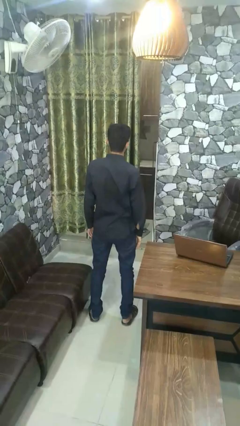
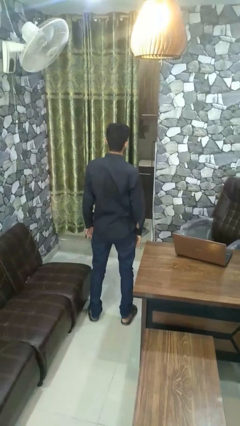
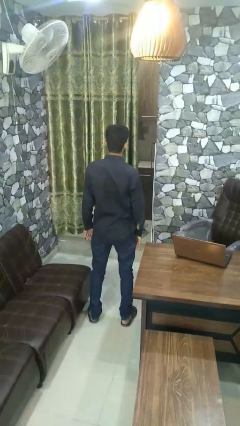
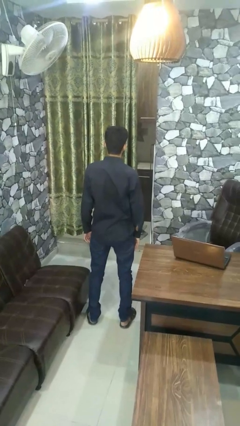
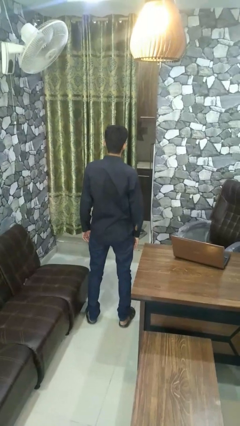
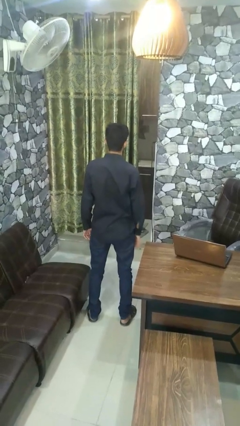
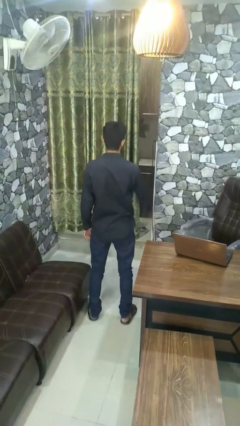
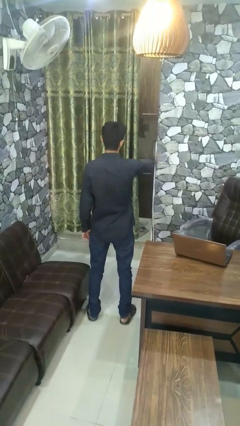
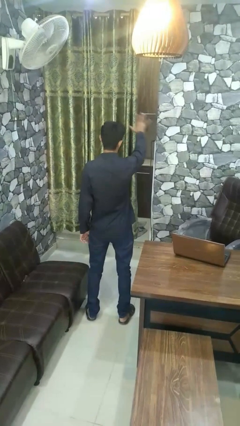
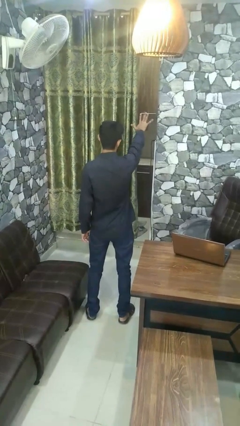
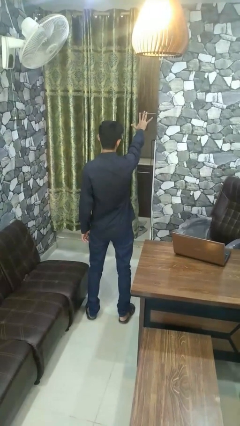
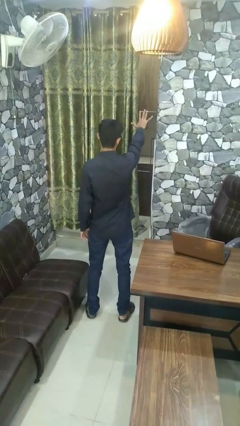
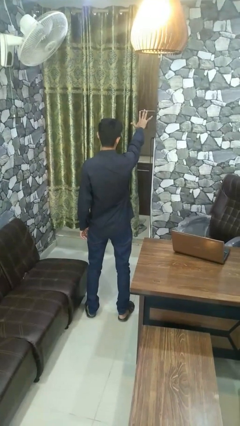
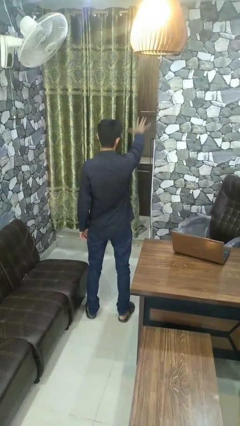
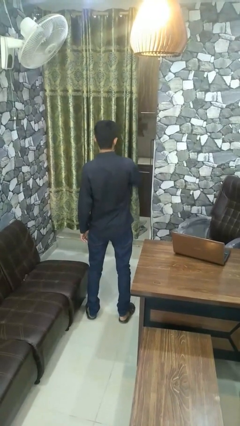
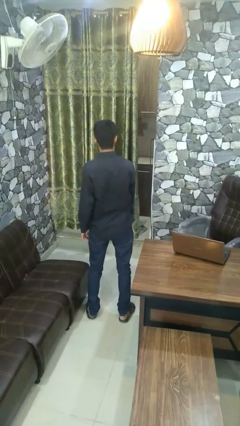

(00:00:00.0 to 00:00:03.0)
person gestures number five

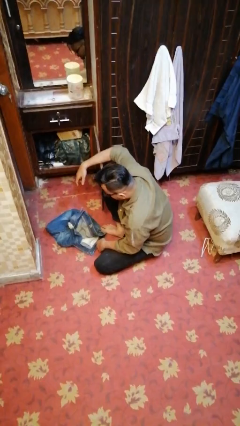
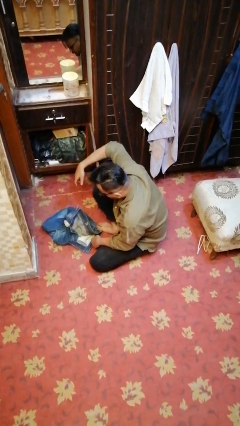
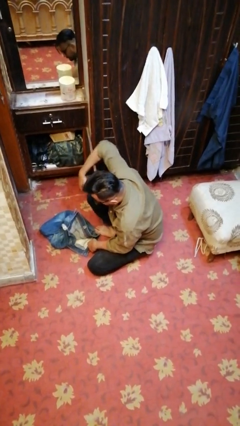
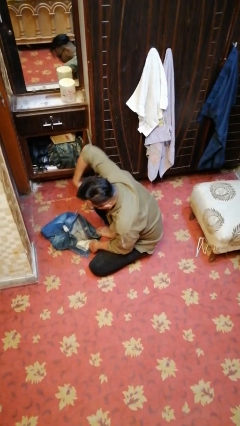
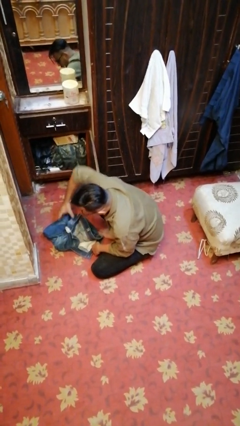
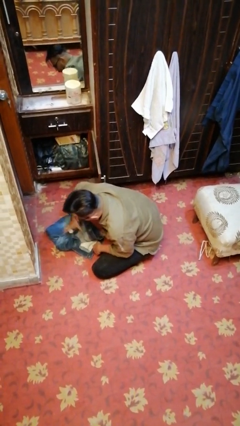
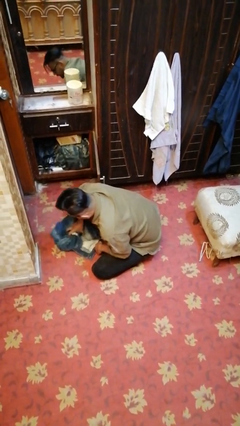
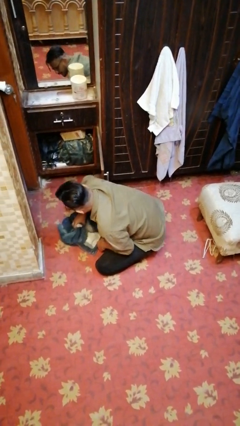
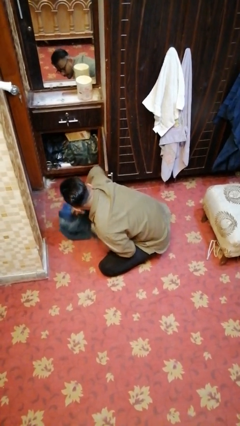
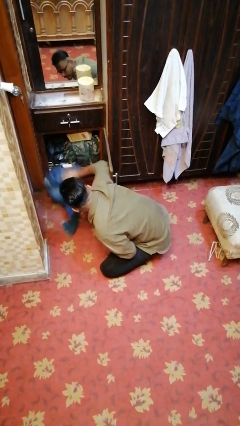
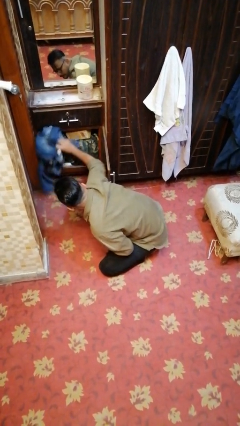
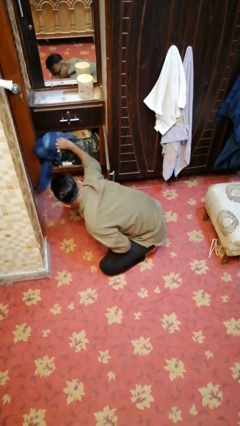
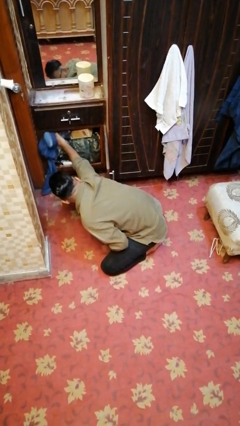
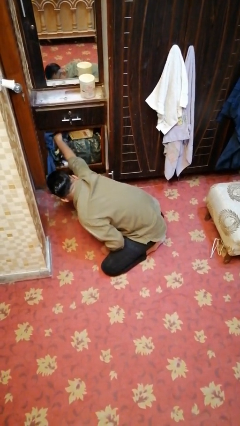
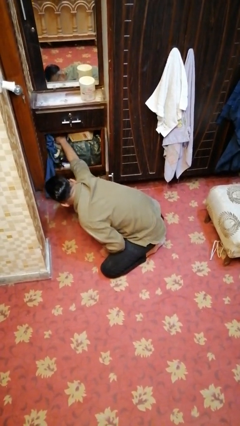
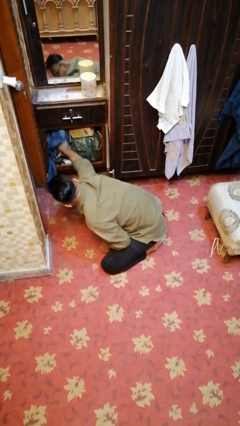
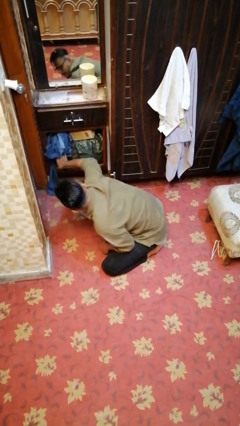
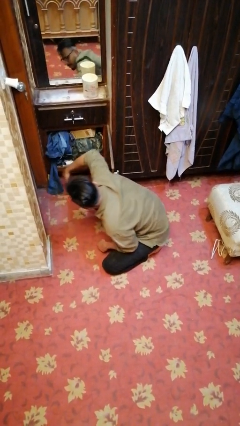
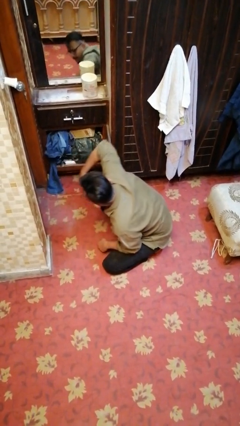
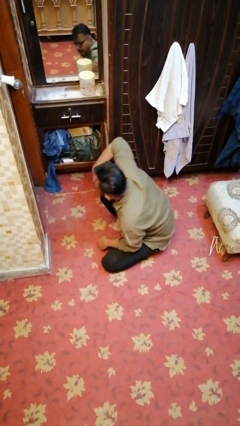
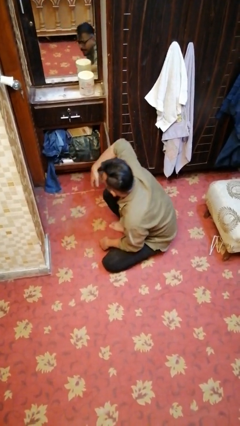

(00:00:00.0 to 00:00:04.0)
person puts clothes into dresser

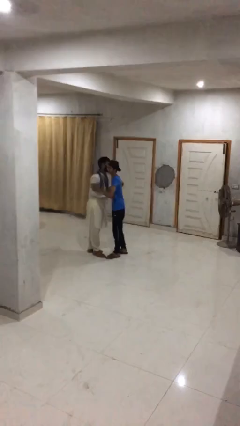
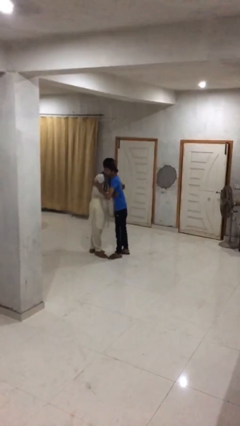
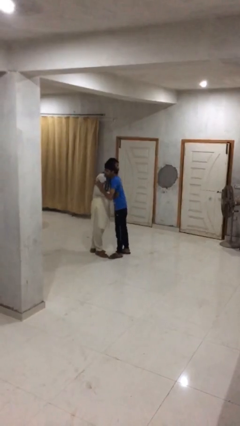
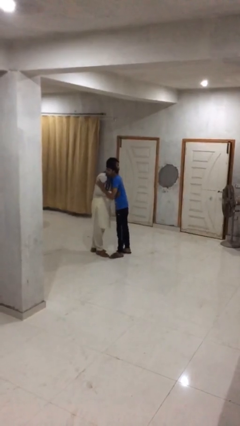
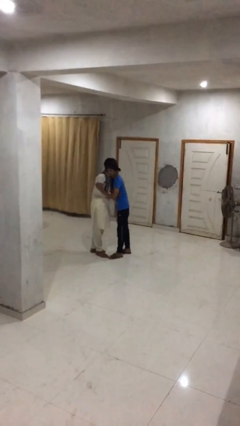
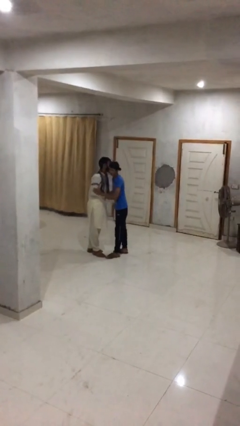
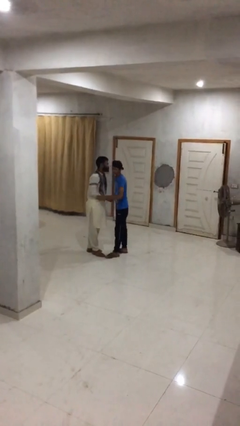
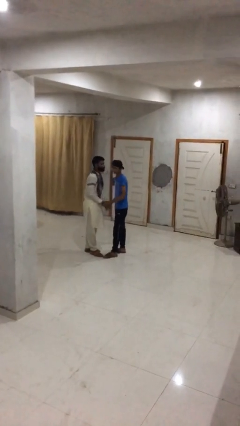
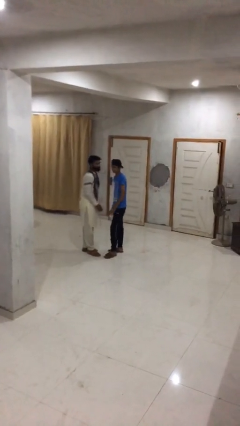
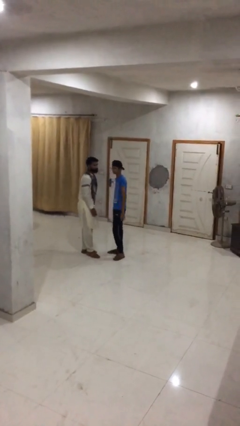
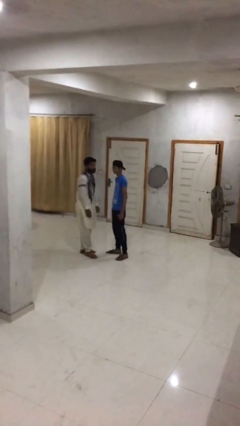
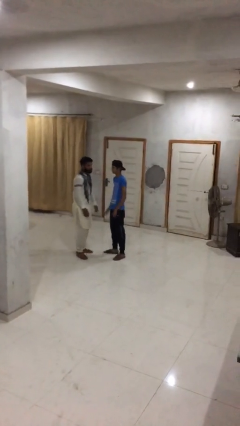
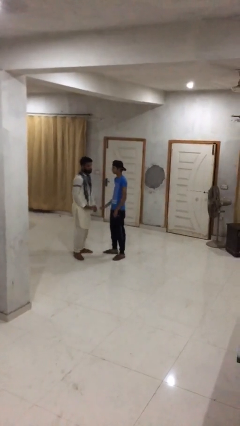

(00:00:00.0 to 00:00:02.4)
person embraces person

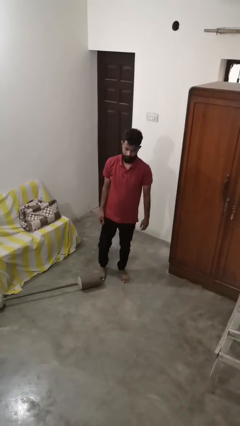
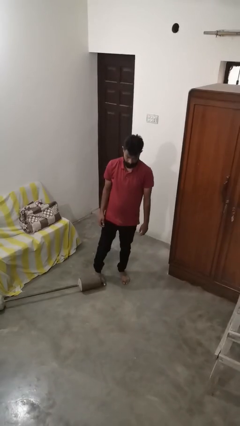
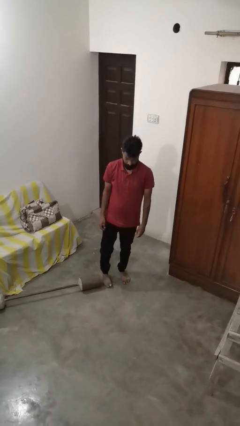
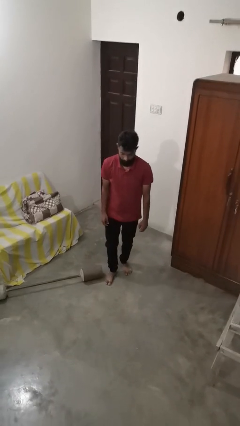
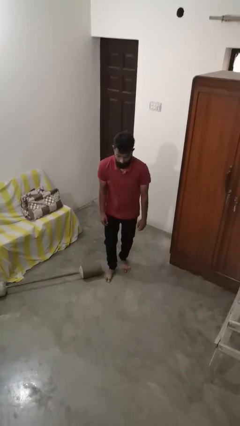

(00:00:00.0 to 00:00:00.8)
person trips on object on floor

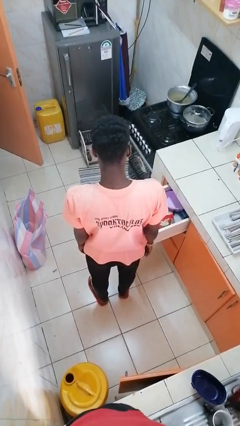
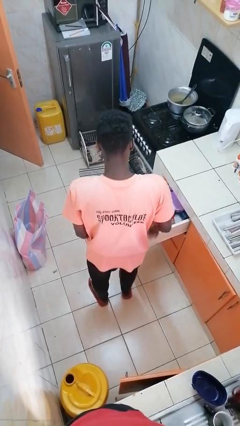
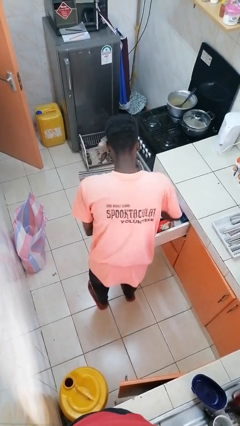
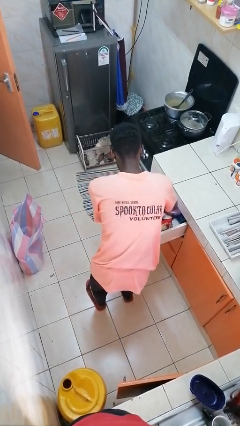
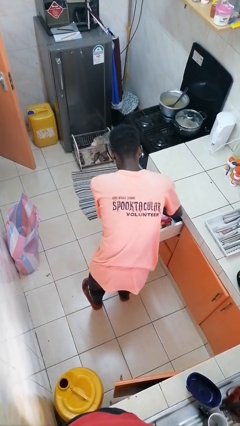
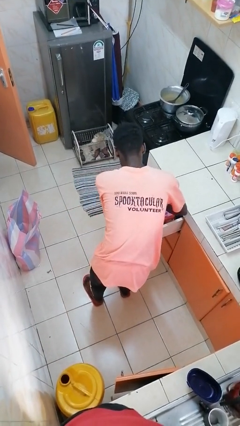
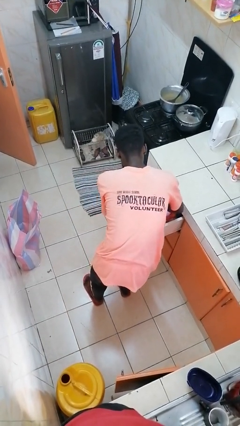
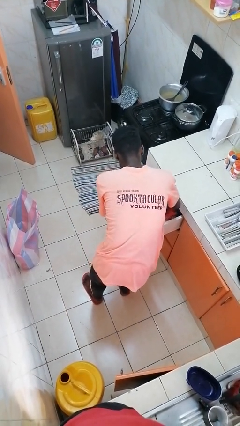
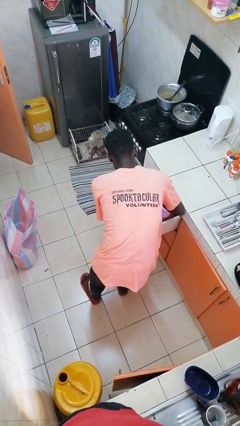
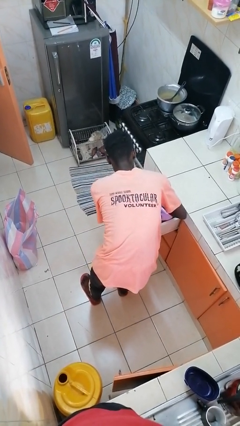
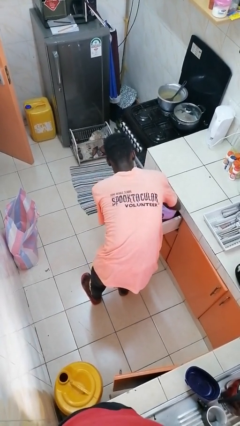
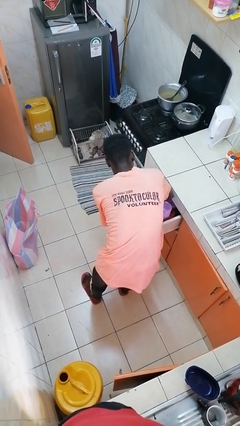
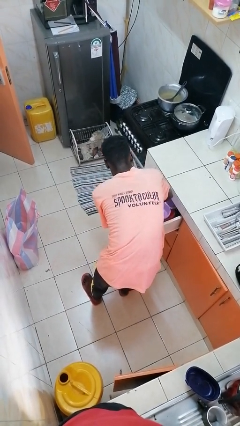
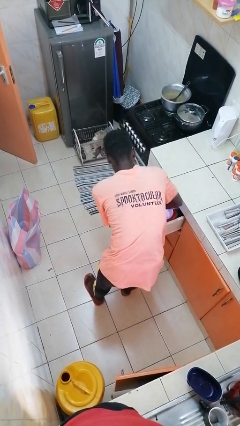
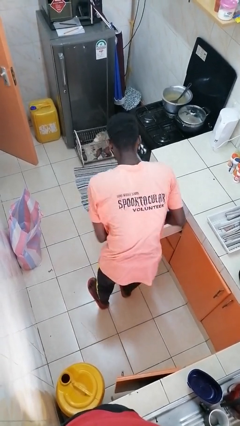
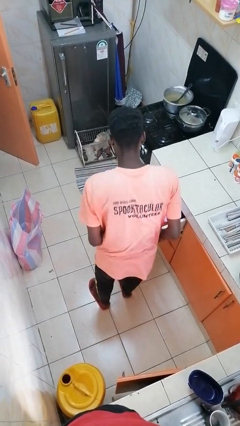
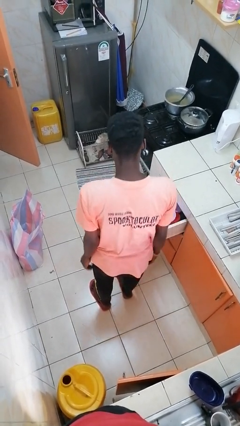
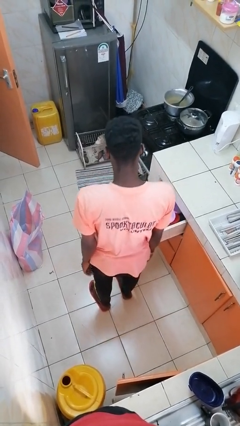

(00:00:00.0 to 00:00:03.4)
person searches in kitchen drawer

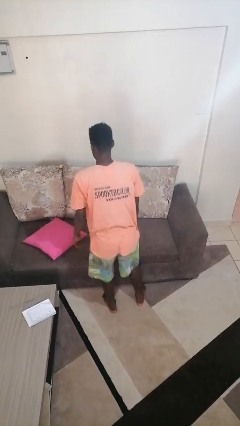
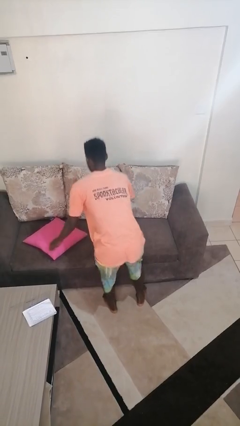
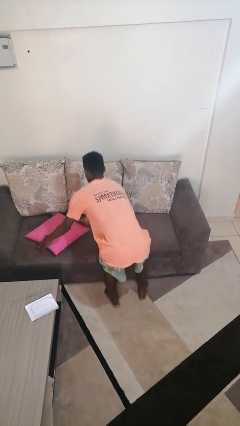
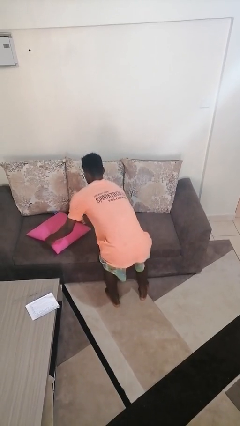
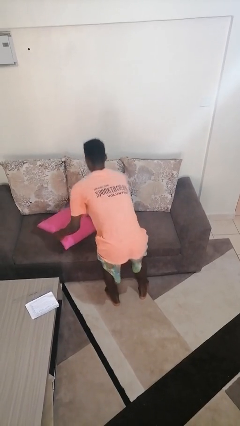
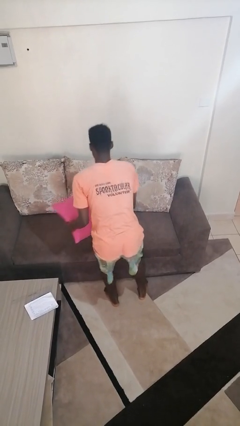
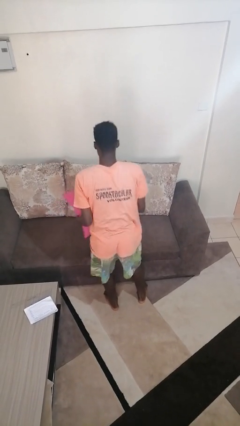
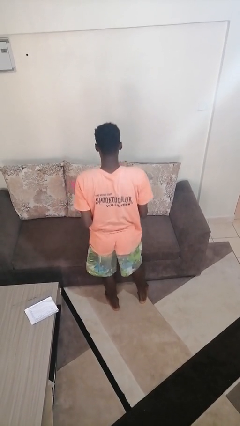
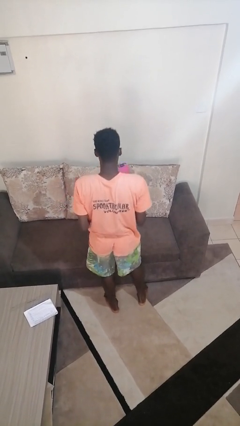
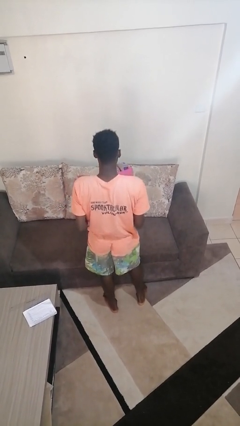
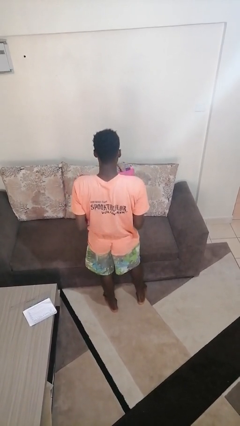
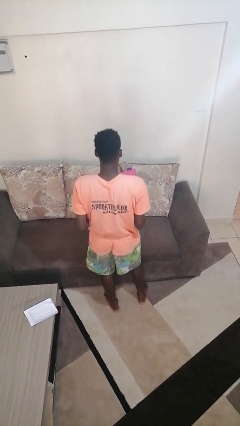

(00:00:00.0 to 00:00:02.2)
person picks up object from couch

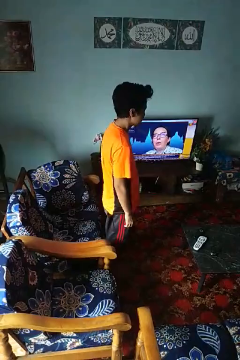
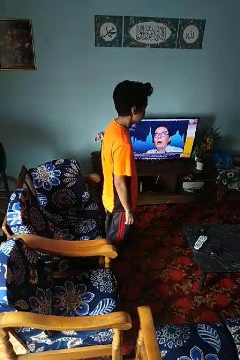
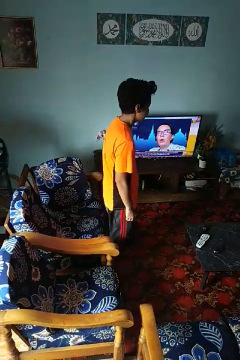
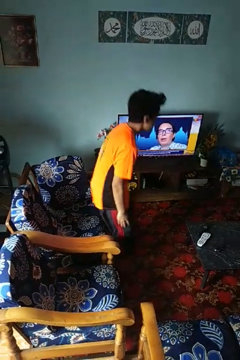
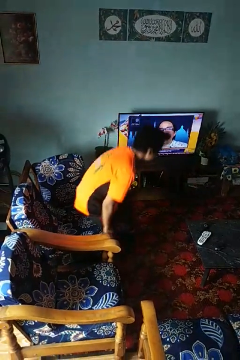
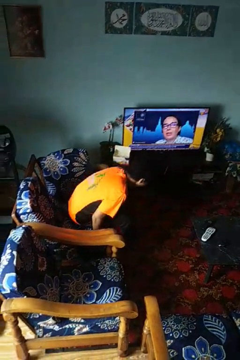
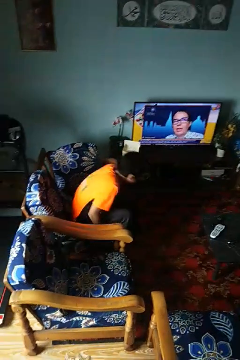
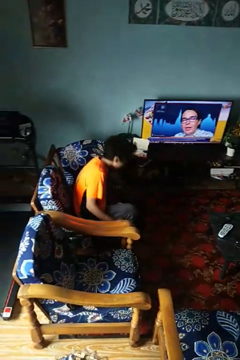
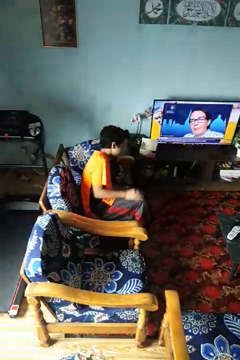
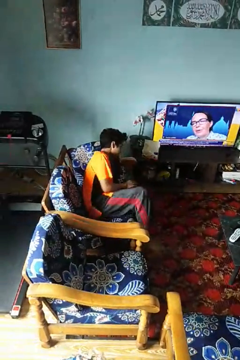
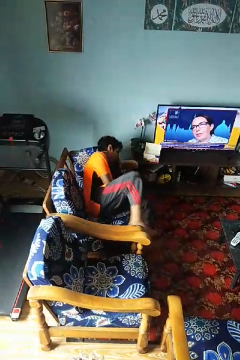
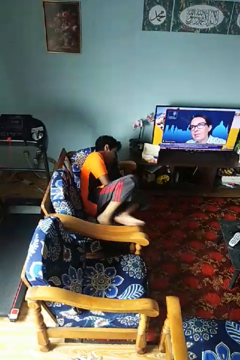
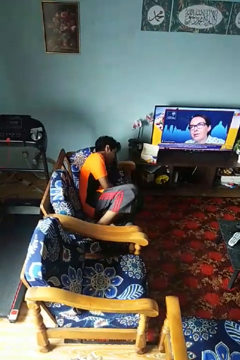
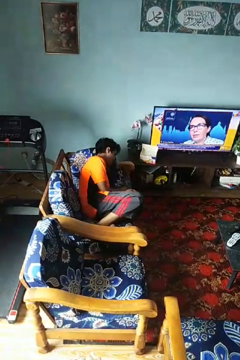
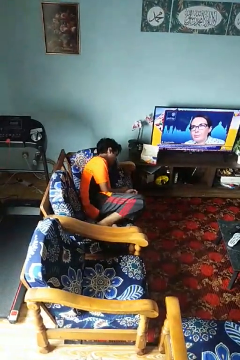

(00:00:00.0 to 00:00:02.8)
person lies down on couch
